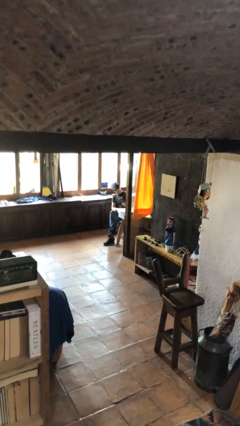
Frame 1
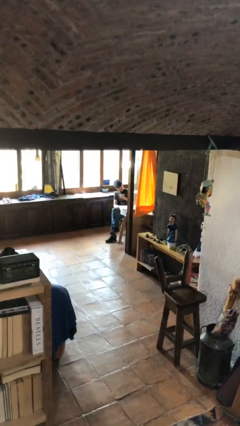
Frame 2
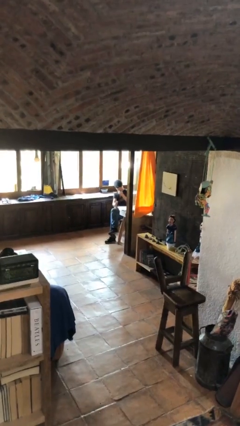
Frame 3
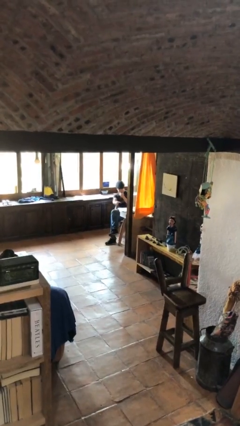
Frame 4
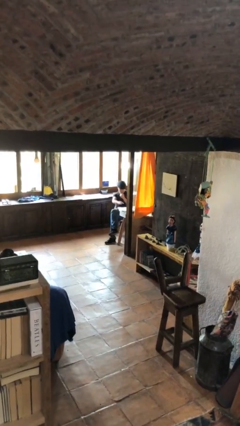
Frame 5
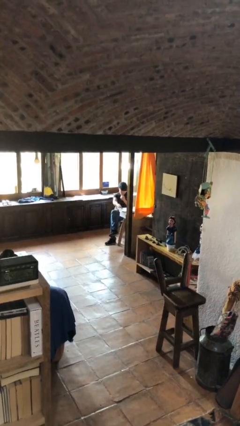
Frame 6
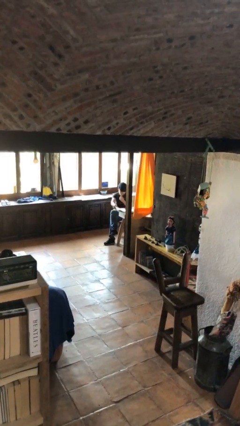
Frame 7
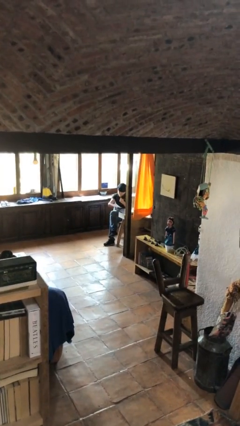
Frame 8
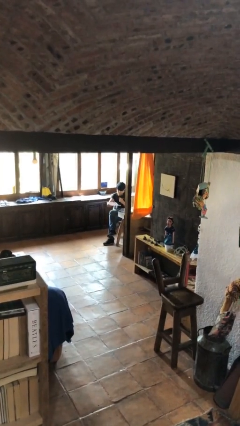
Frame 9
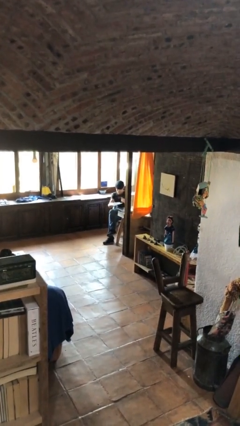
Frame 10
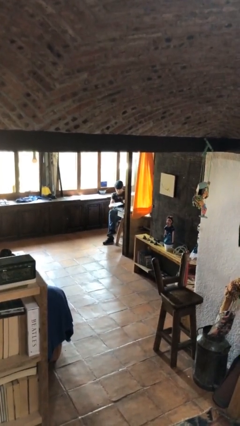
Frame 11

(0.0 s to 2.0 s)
person picks up object from table

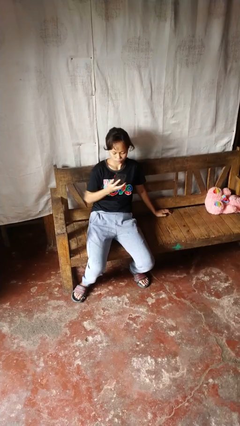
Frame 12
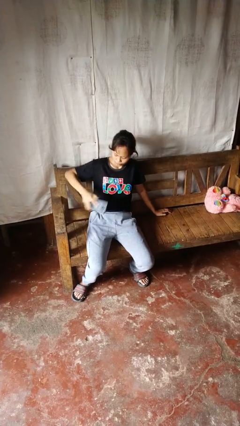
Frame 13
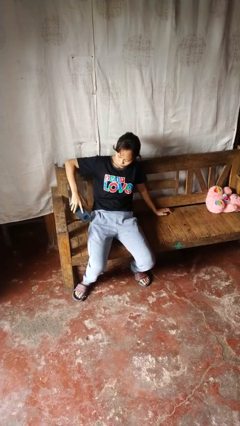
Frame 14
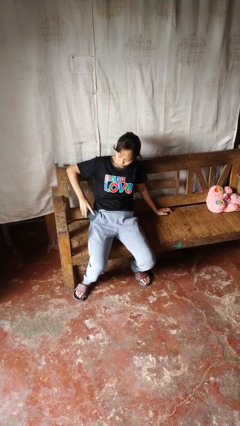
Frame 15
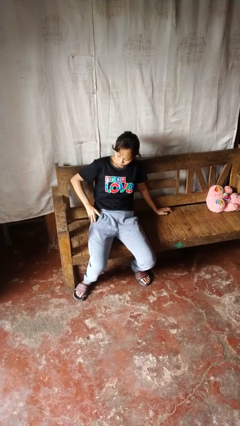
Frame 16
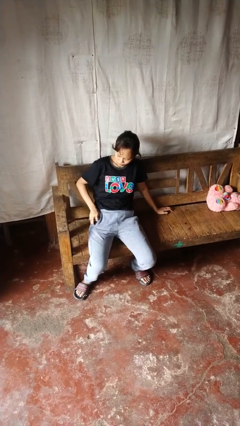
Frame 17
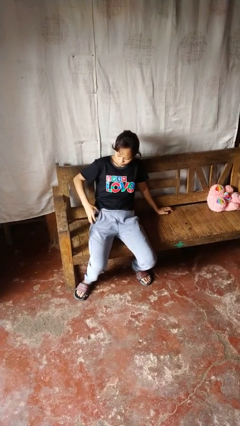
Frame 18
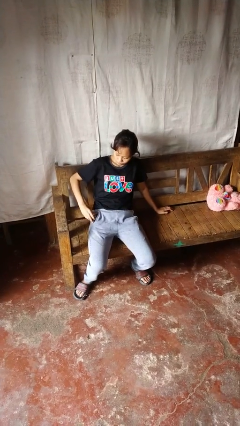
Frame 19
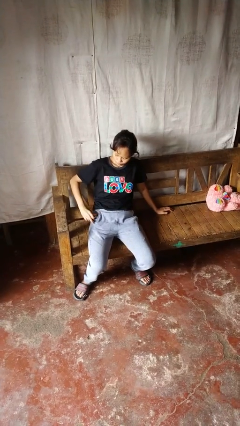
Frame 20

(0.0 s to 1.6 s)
person puts phone into pocket

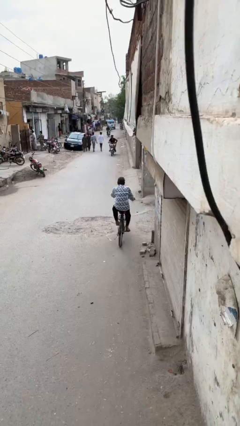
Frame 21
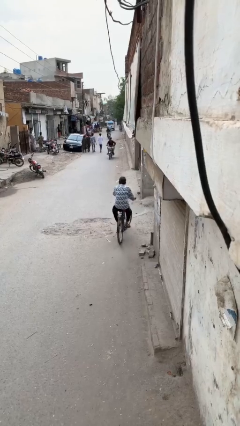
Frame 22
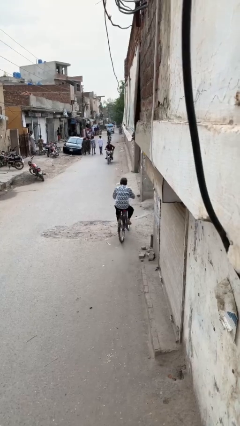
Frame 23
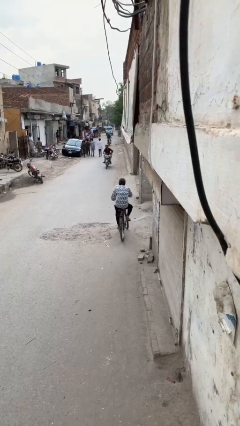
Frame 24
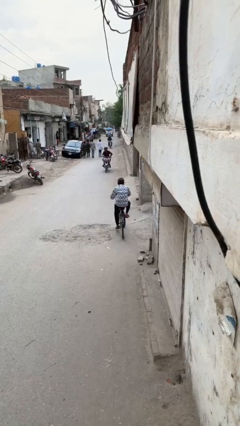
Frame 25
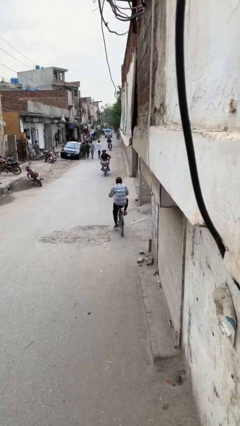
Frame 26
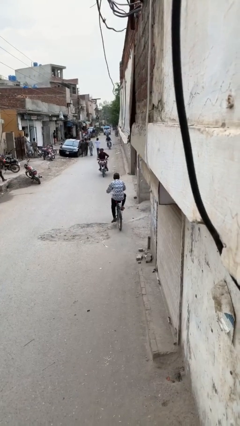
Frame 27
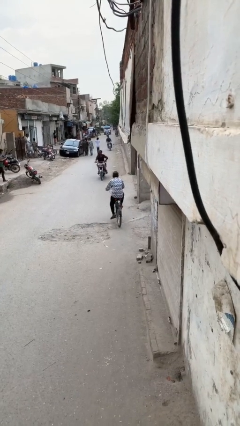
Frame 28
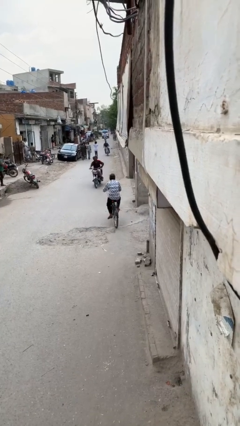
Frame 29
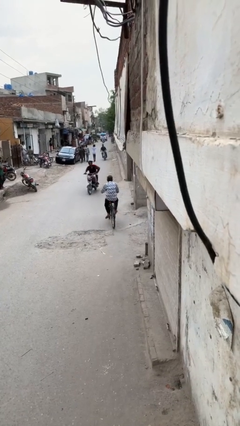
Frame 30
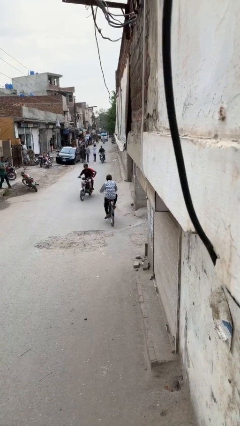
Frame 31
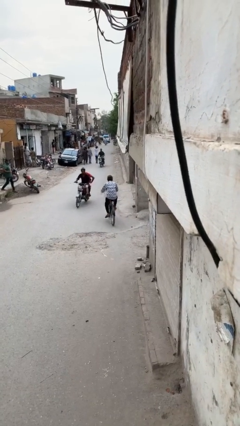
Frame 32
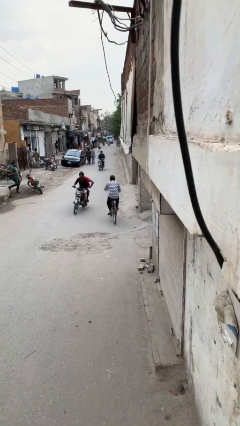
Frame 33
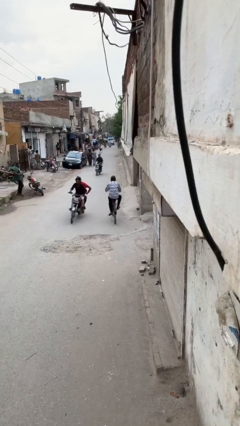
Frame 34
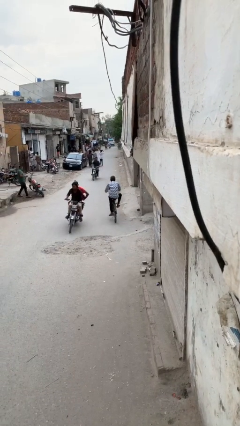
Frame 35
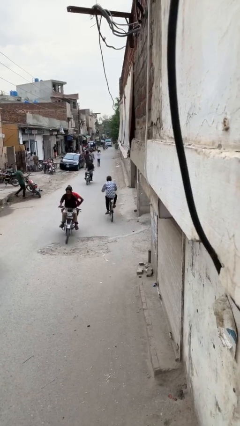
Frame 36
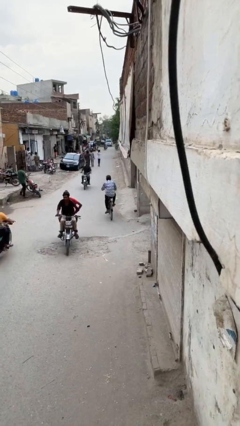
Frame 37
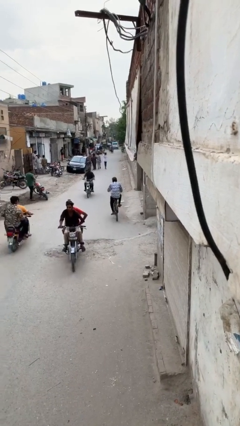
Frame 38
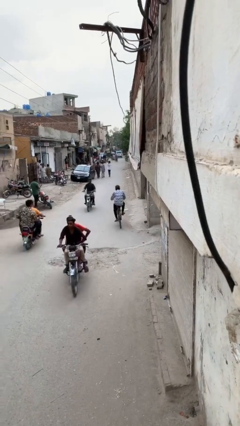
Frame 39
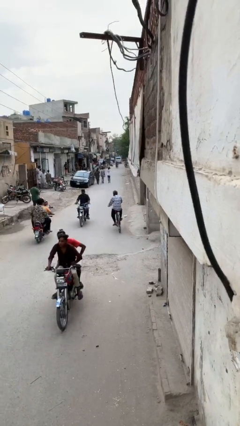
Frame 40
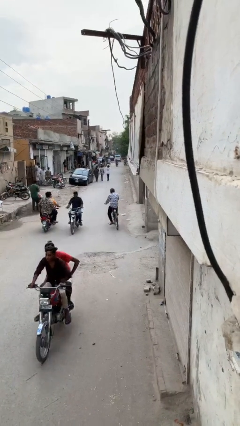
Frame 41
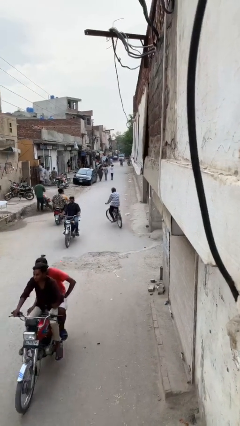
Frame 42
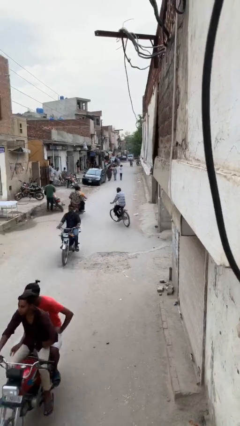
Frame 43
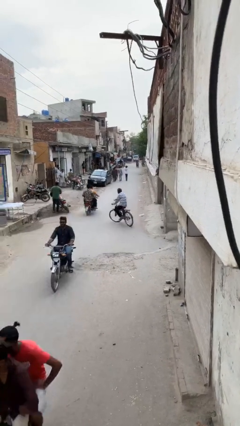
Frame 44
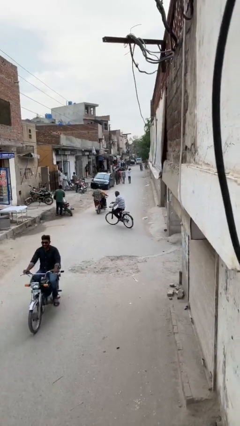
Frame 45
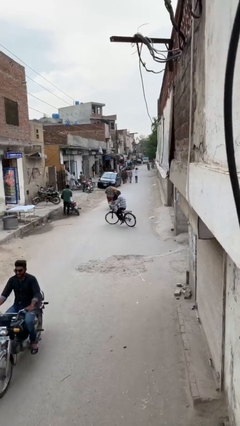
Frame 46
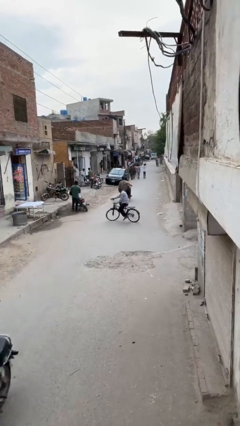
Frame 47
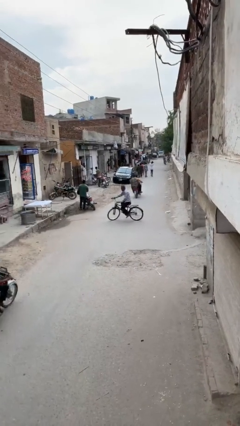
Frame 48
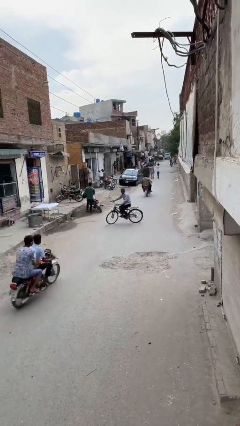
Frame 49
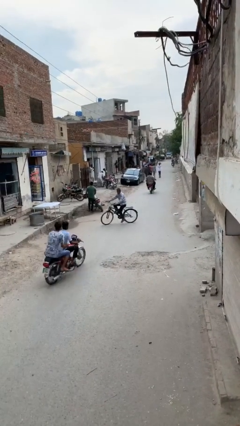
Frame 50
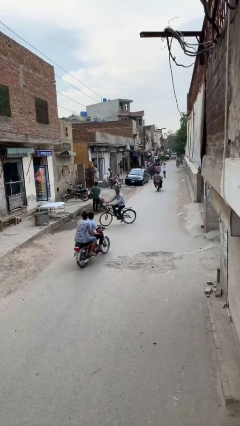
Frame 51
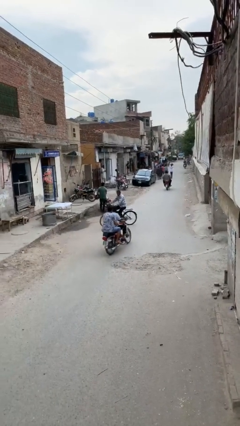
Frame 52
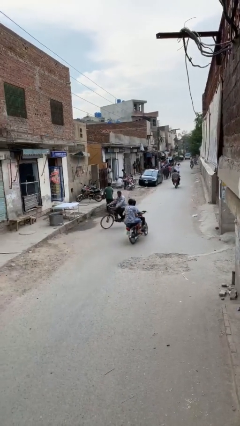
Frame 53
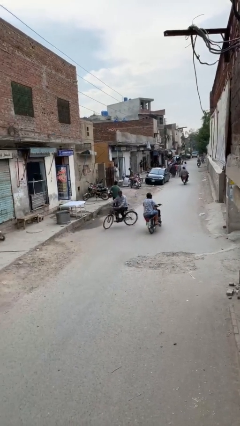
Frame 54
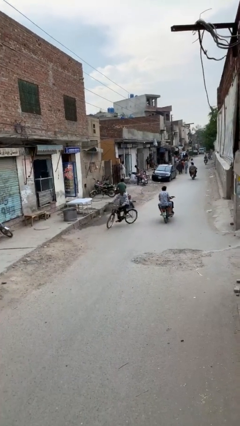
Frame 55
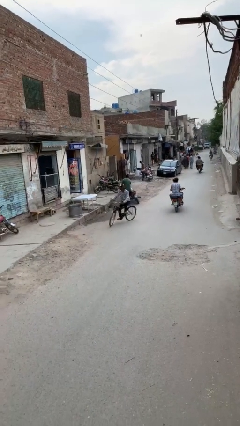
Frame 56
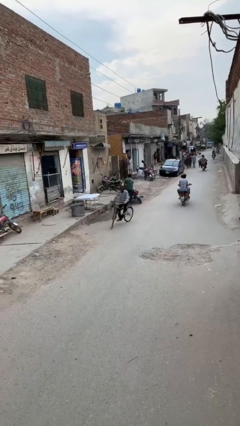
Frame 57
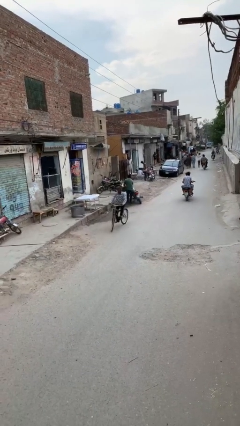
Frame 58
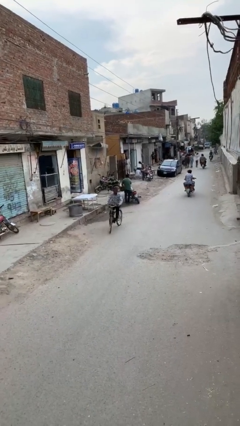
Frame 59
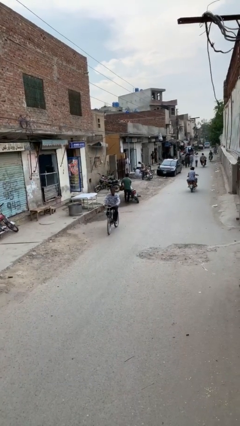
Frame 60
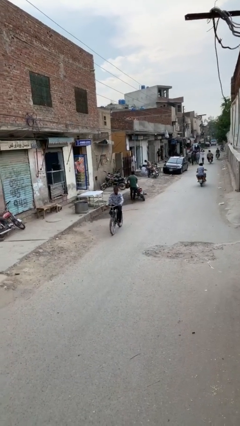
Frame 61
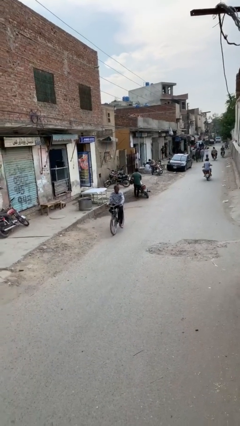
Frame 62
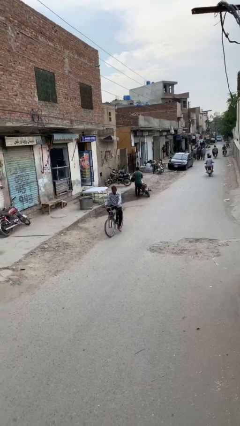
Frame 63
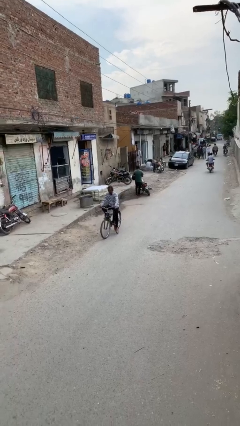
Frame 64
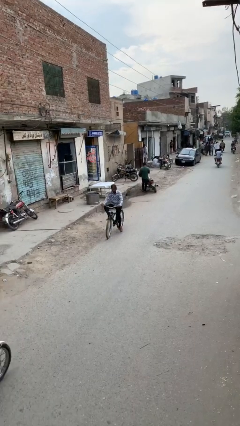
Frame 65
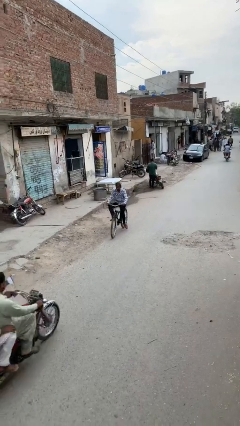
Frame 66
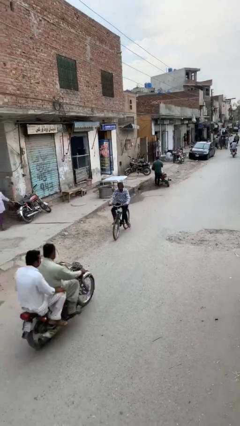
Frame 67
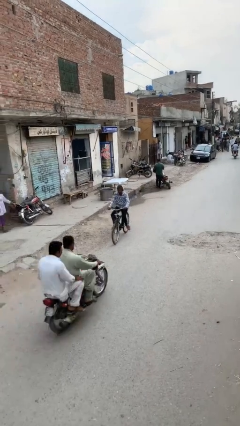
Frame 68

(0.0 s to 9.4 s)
person rides bicycle

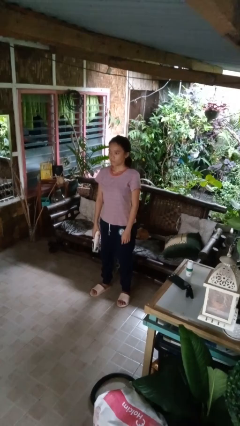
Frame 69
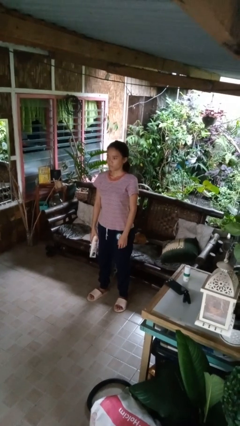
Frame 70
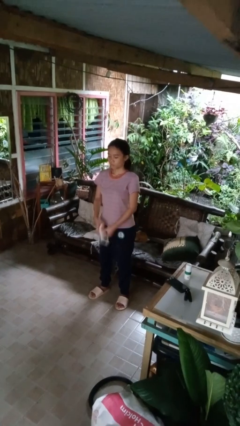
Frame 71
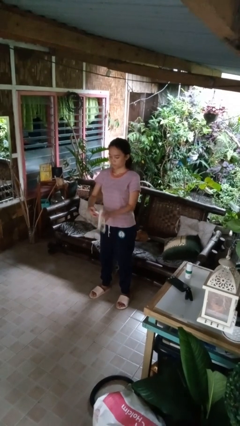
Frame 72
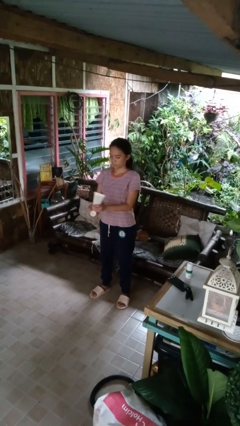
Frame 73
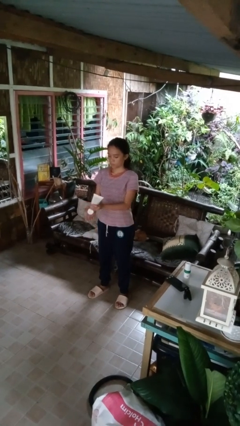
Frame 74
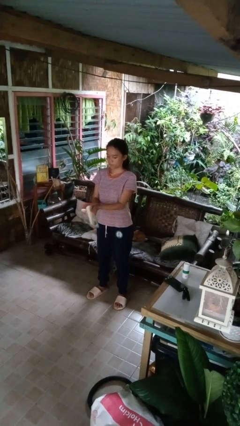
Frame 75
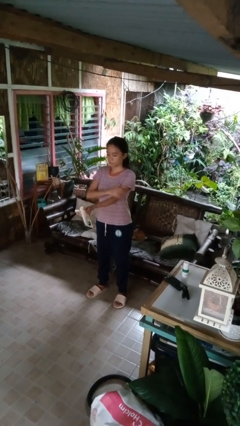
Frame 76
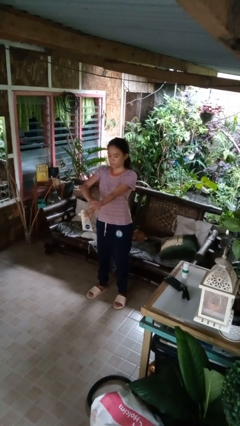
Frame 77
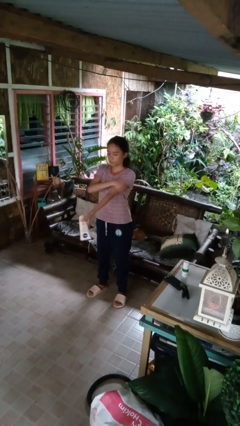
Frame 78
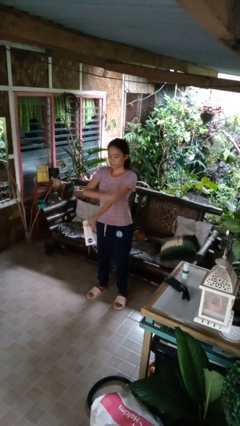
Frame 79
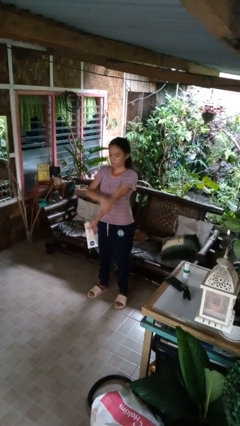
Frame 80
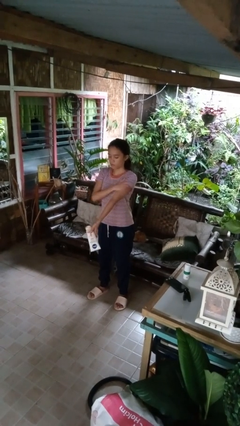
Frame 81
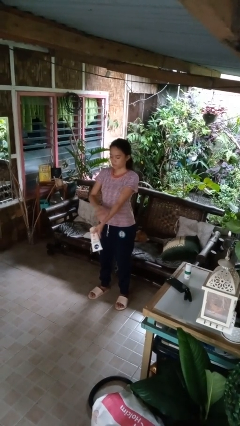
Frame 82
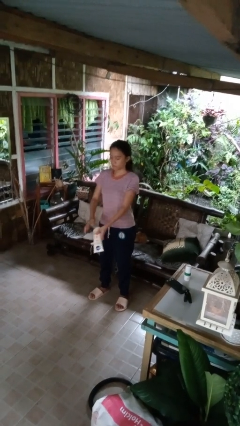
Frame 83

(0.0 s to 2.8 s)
person applies sunscreen

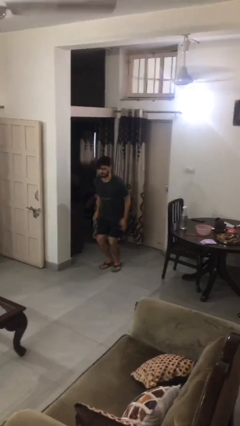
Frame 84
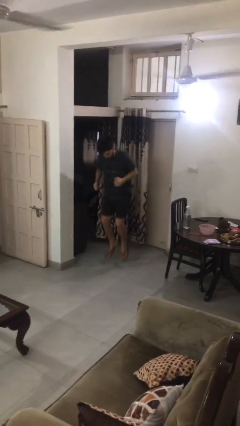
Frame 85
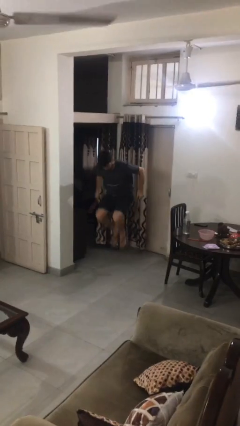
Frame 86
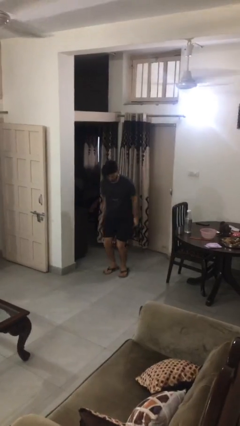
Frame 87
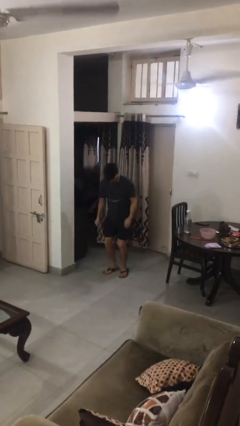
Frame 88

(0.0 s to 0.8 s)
person jumps

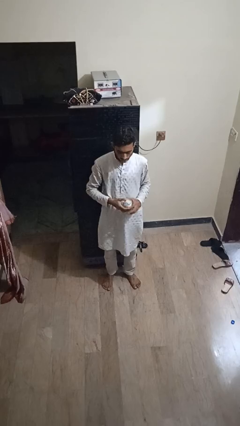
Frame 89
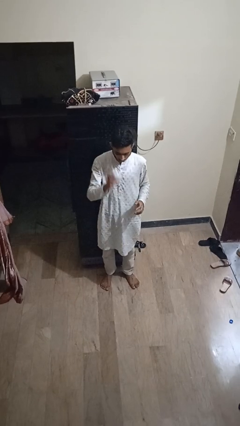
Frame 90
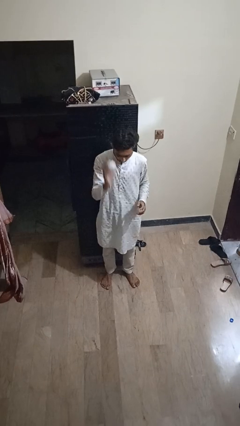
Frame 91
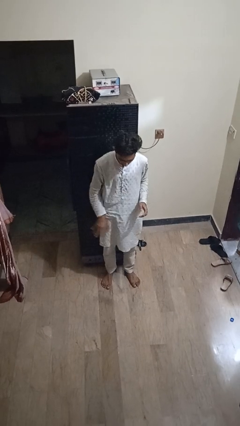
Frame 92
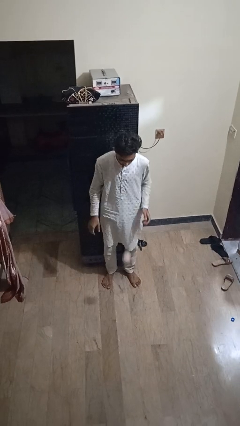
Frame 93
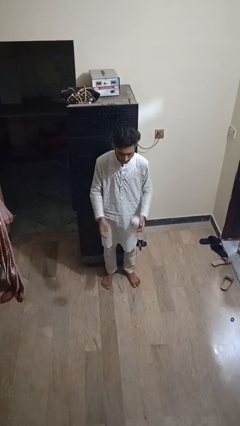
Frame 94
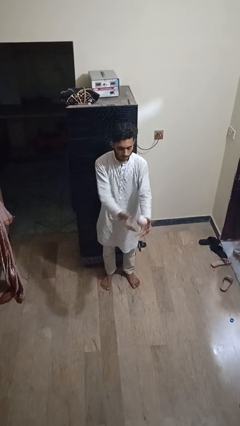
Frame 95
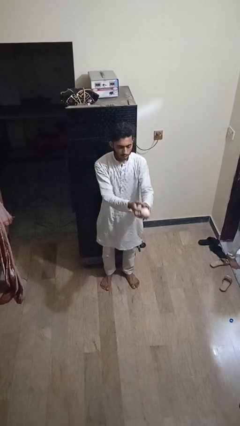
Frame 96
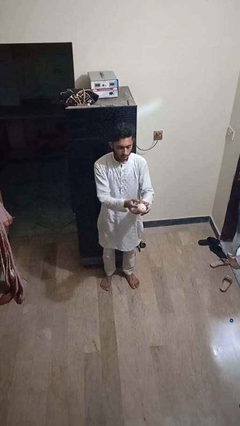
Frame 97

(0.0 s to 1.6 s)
person bounces ball on floor
